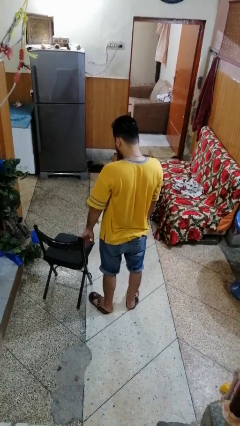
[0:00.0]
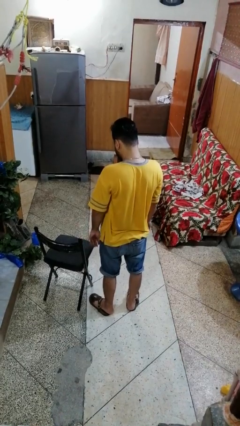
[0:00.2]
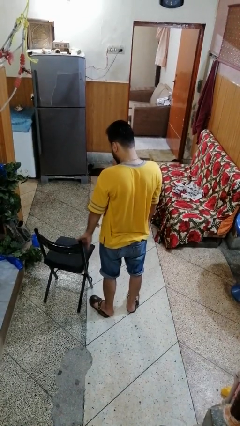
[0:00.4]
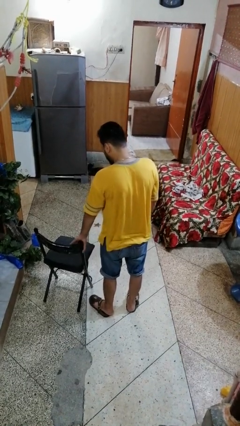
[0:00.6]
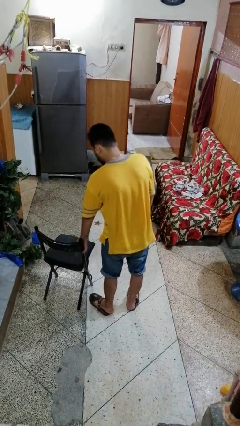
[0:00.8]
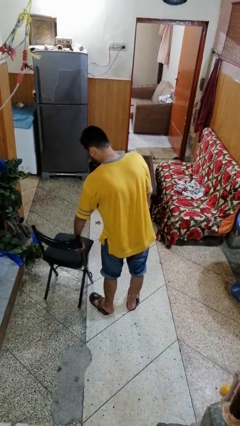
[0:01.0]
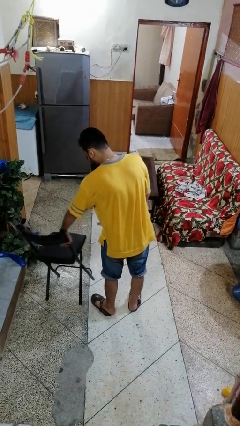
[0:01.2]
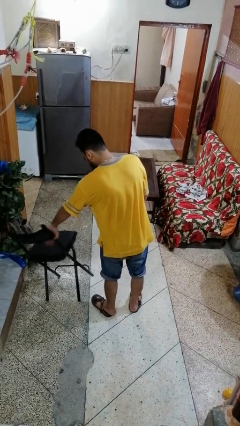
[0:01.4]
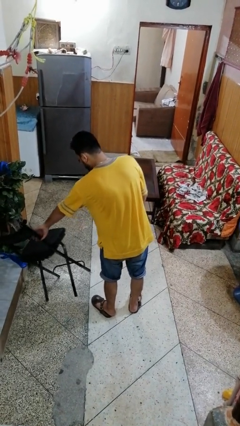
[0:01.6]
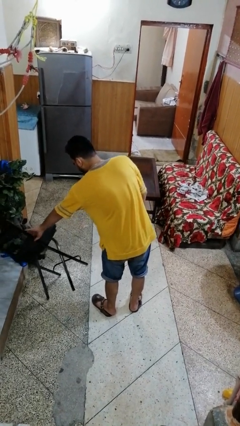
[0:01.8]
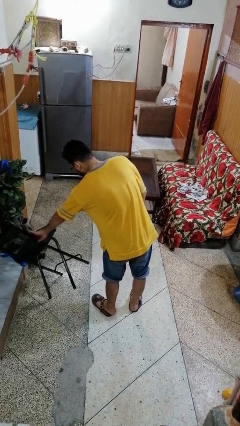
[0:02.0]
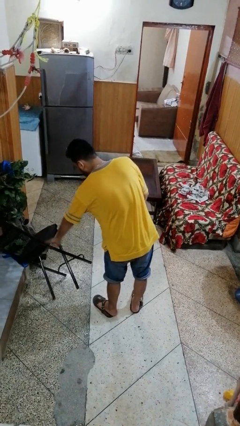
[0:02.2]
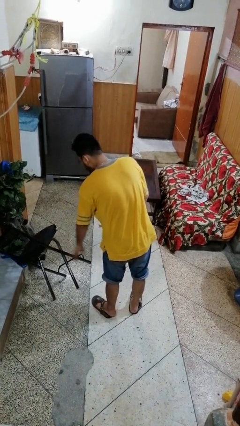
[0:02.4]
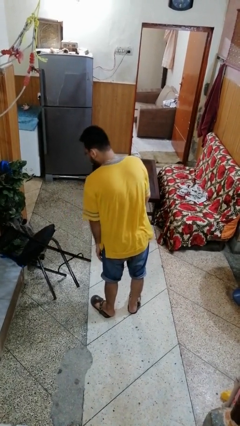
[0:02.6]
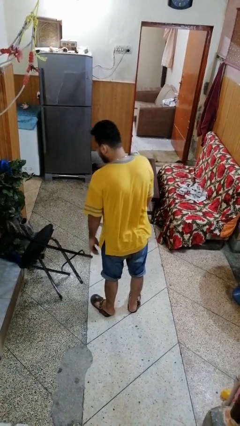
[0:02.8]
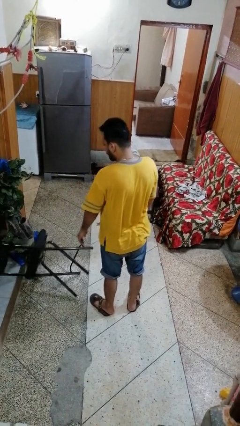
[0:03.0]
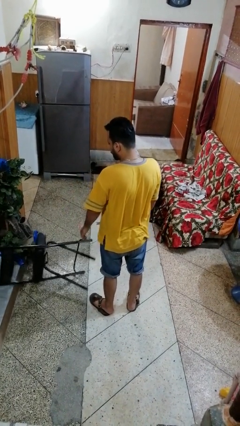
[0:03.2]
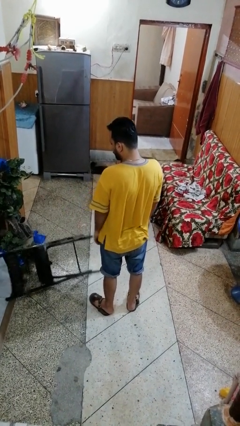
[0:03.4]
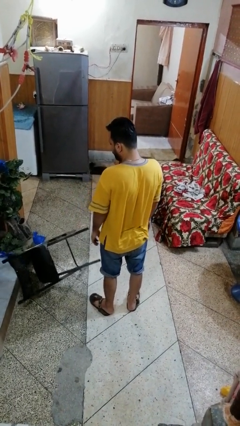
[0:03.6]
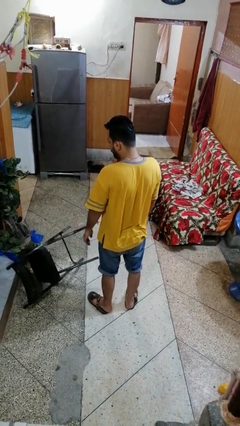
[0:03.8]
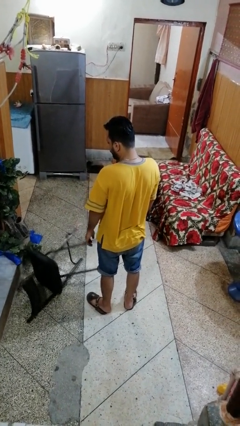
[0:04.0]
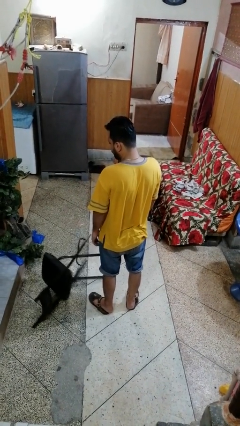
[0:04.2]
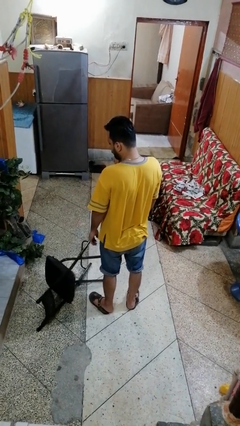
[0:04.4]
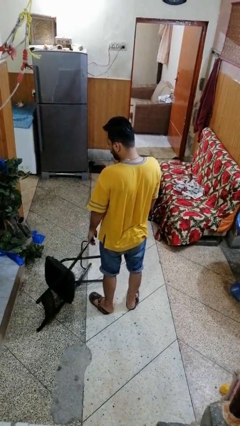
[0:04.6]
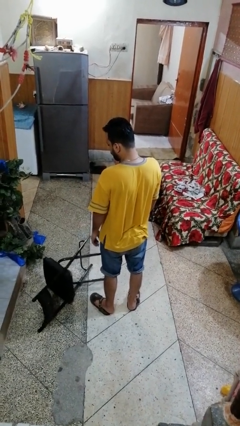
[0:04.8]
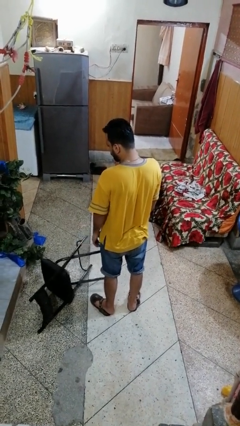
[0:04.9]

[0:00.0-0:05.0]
person knocks over furniture

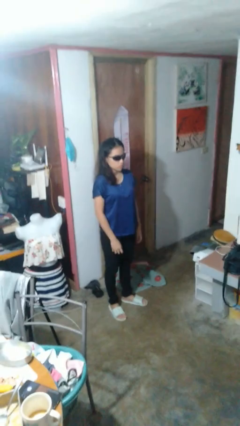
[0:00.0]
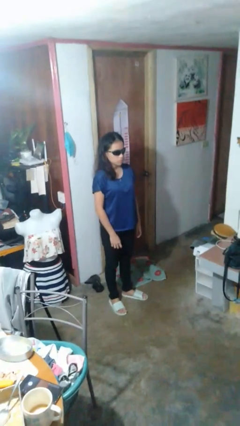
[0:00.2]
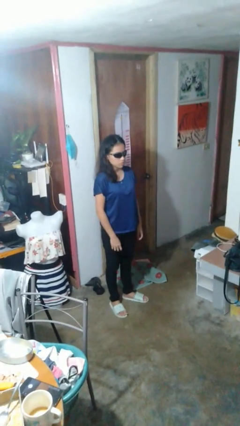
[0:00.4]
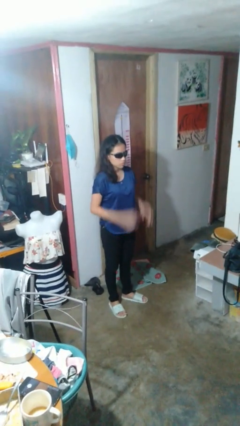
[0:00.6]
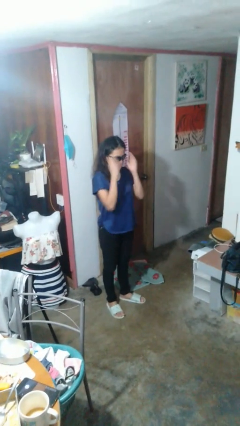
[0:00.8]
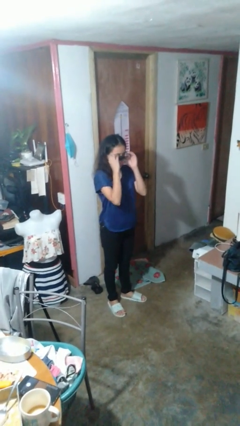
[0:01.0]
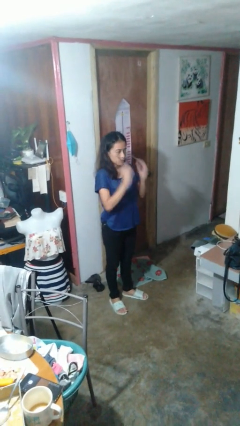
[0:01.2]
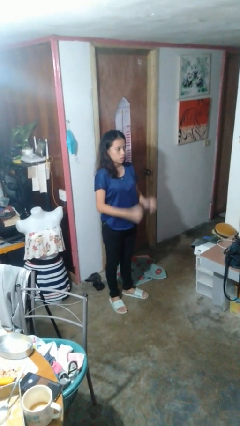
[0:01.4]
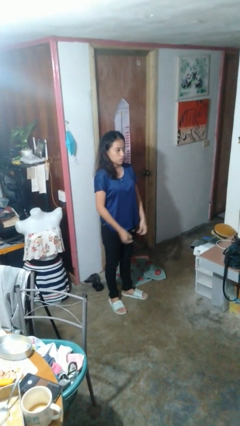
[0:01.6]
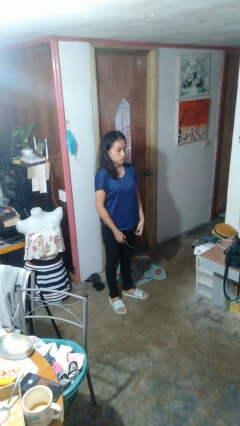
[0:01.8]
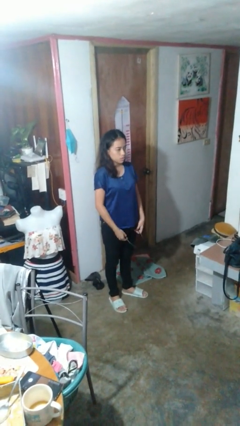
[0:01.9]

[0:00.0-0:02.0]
person takes off sunglasses

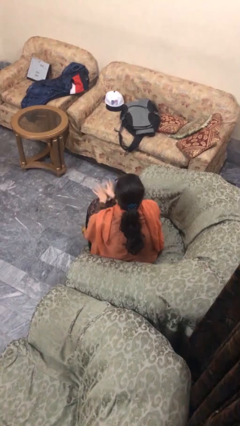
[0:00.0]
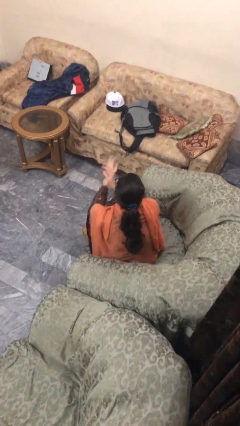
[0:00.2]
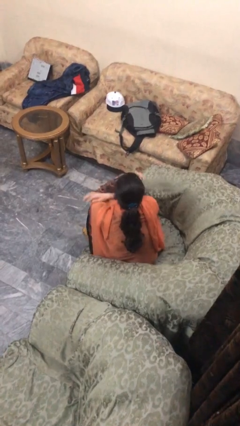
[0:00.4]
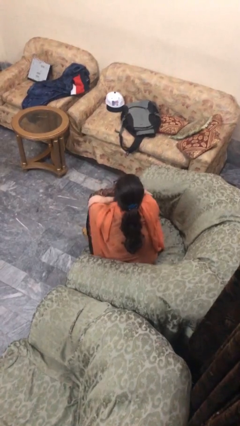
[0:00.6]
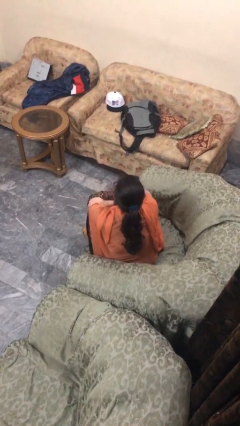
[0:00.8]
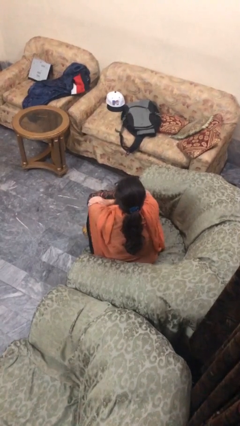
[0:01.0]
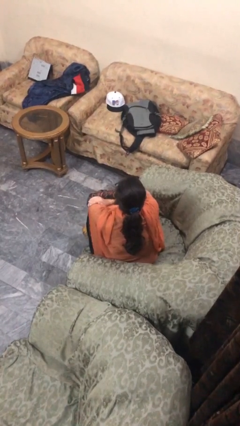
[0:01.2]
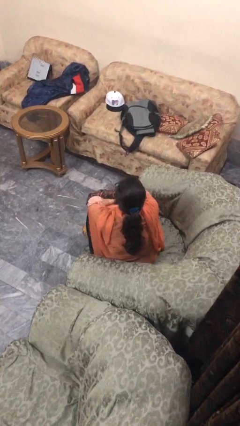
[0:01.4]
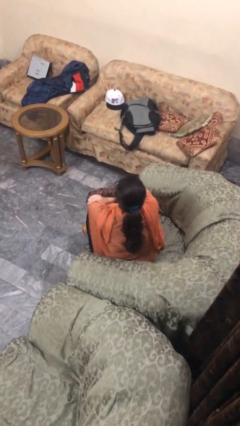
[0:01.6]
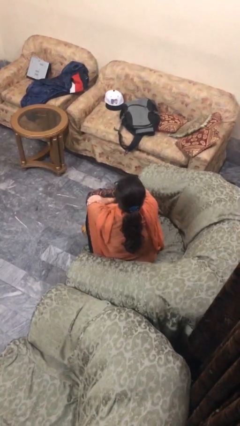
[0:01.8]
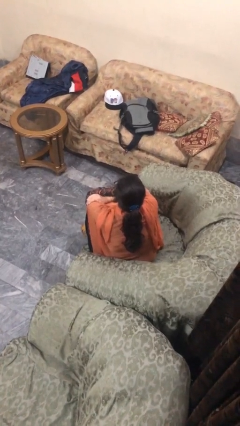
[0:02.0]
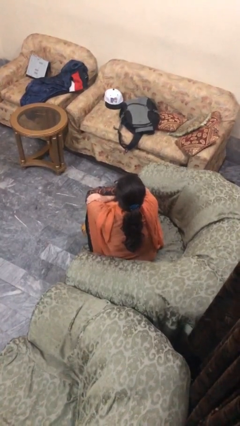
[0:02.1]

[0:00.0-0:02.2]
person crosses arms

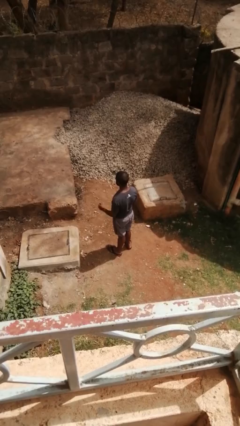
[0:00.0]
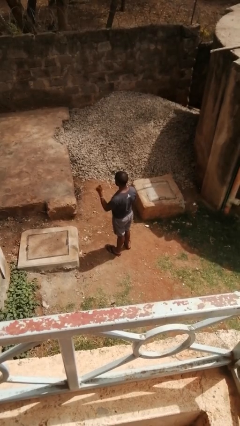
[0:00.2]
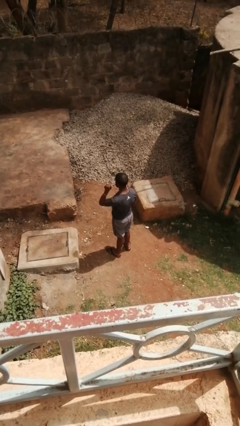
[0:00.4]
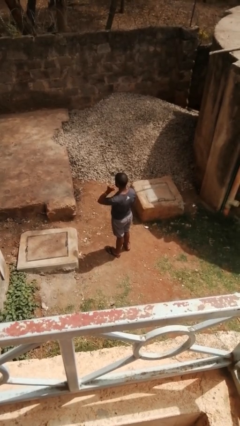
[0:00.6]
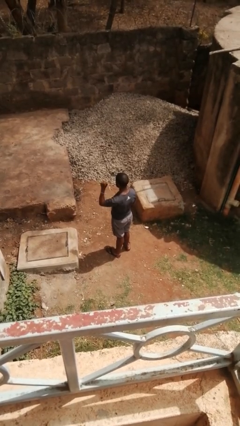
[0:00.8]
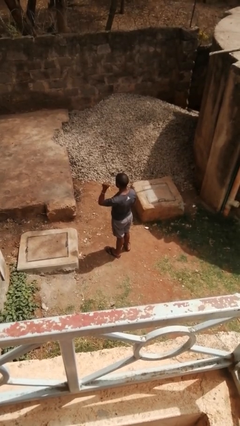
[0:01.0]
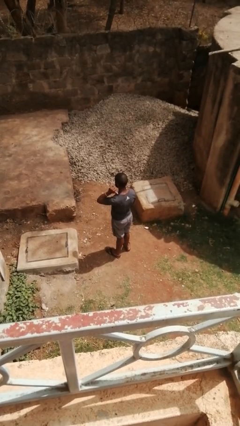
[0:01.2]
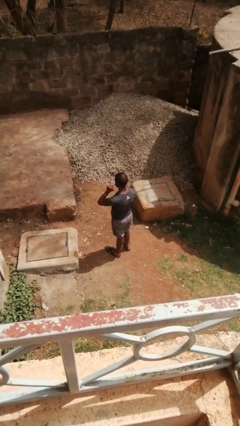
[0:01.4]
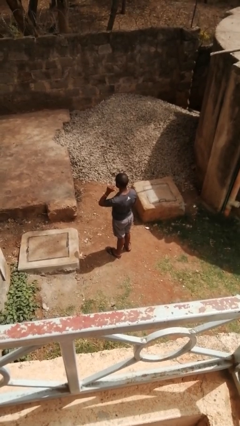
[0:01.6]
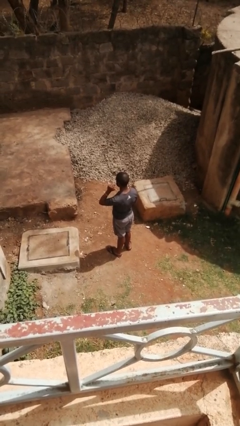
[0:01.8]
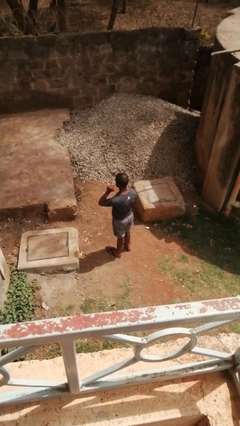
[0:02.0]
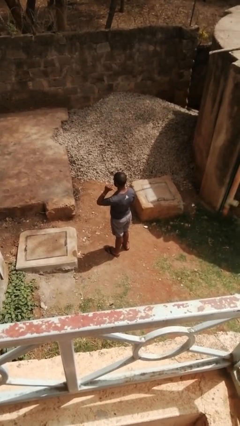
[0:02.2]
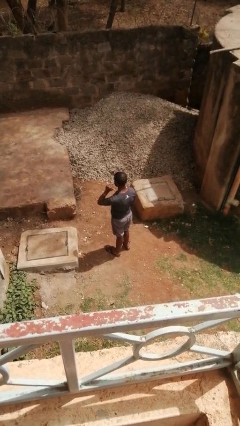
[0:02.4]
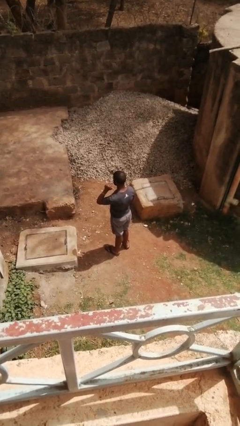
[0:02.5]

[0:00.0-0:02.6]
person gestures behind me

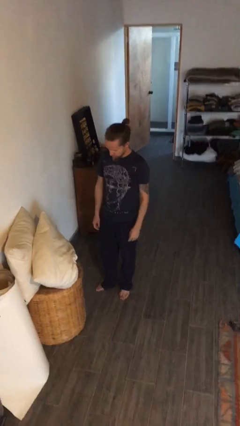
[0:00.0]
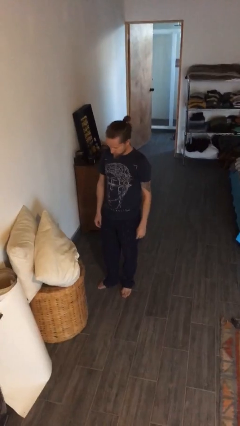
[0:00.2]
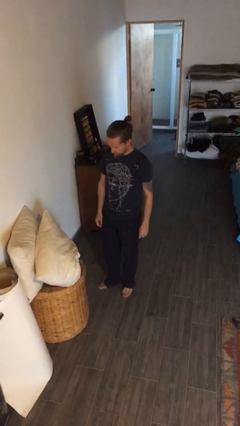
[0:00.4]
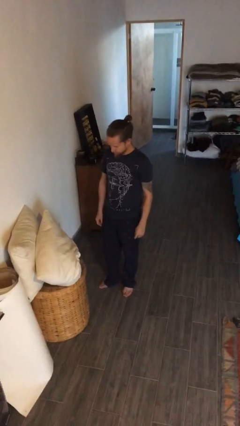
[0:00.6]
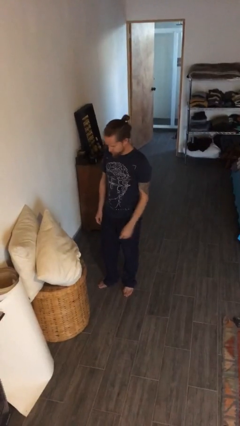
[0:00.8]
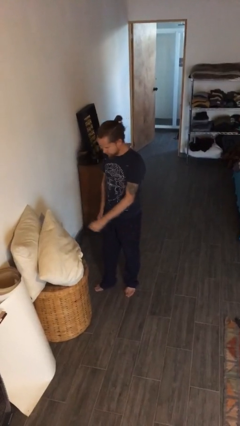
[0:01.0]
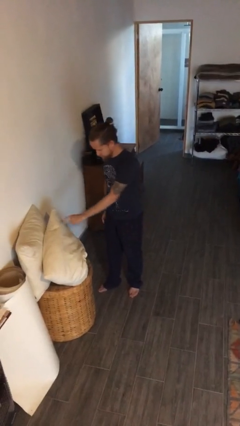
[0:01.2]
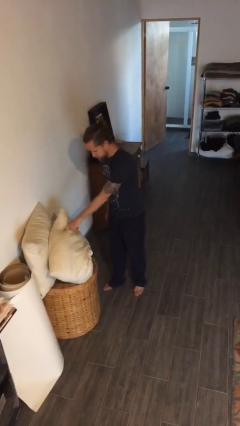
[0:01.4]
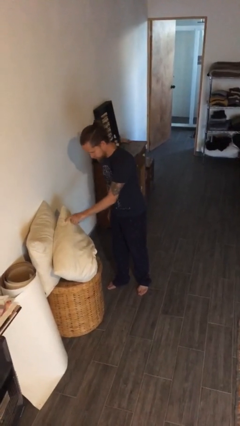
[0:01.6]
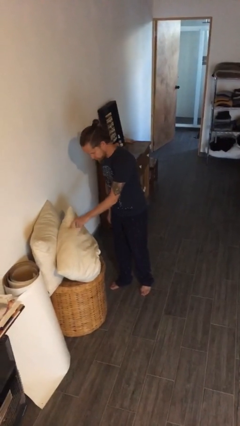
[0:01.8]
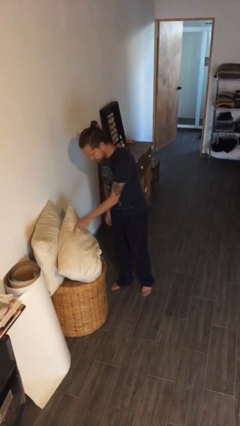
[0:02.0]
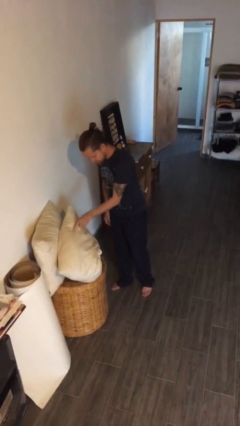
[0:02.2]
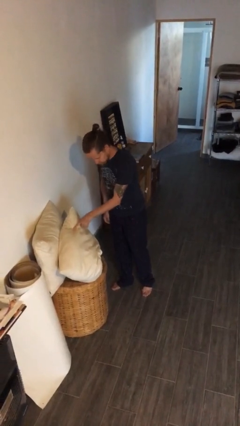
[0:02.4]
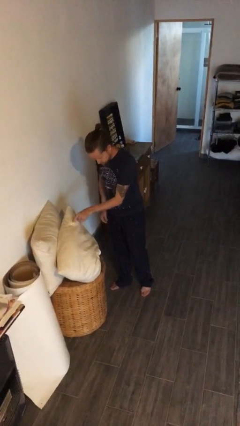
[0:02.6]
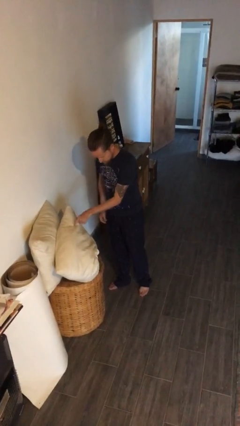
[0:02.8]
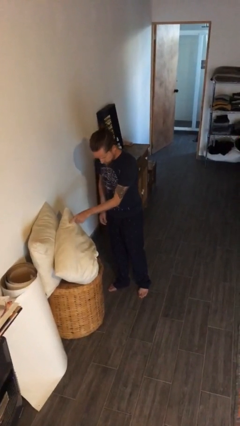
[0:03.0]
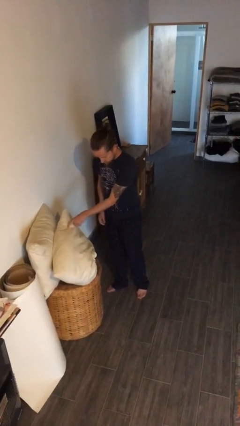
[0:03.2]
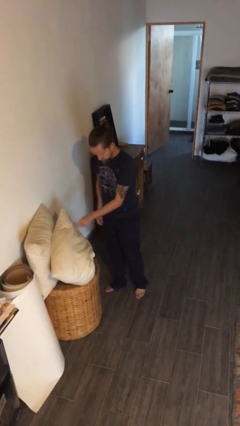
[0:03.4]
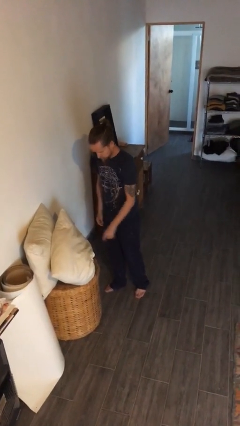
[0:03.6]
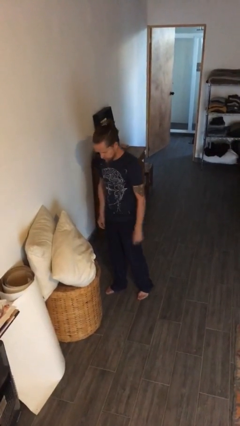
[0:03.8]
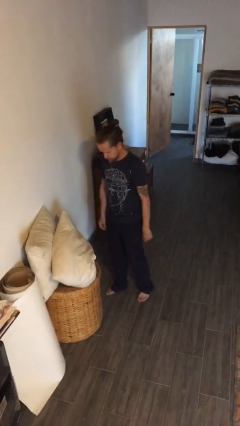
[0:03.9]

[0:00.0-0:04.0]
person taps object with finger

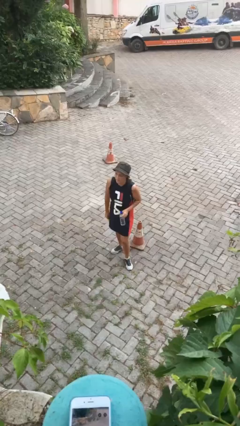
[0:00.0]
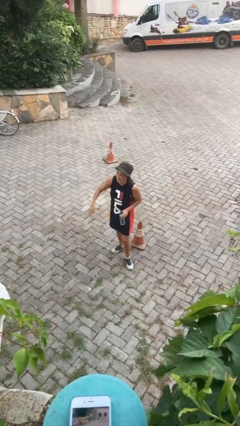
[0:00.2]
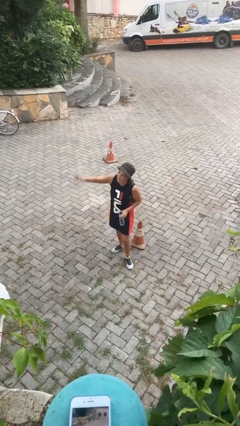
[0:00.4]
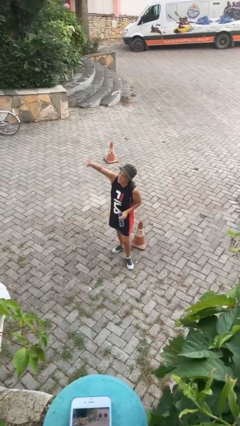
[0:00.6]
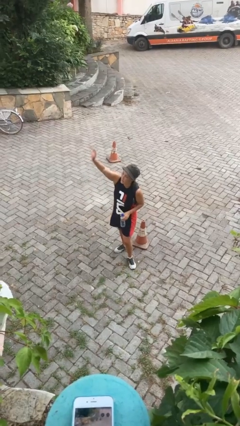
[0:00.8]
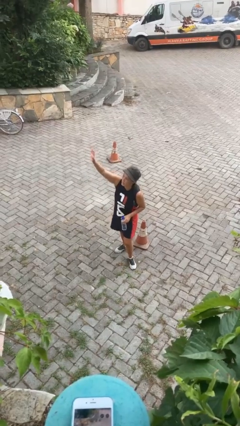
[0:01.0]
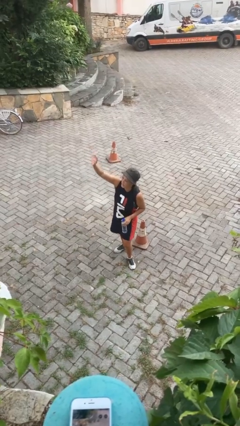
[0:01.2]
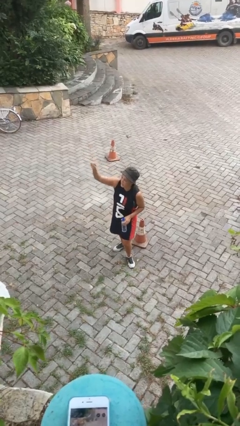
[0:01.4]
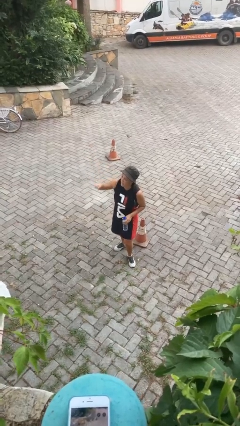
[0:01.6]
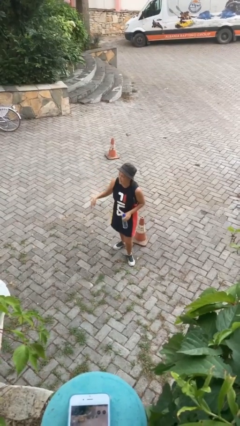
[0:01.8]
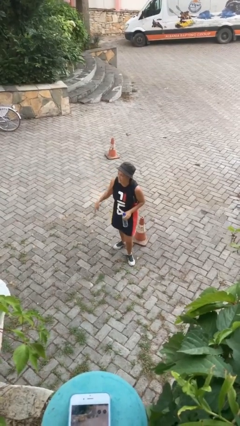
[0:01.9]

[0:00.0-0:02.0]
person gestures raise hand
